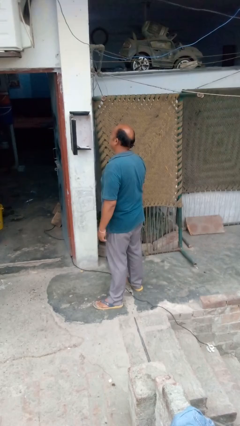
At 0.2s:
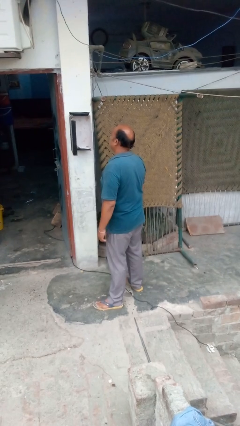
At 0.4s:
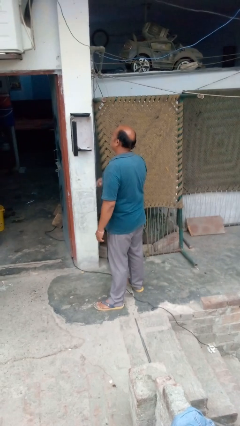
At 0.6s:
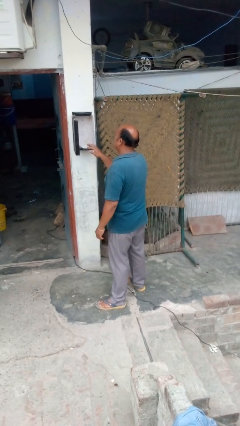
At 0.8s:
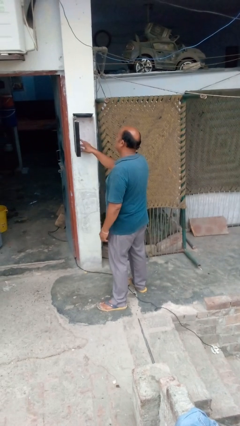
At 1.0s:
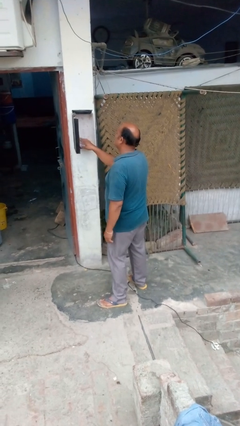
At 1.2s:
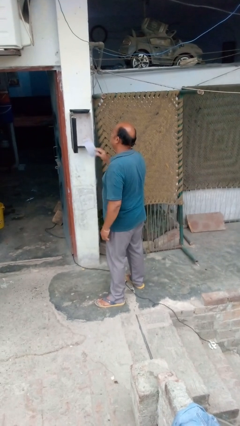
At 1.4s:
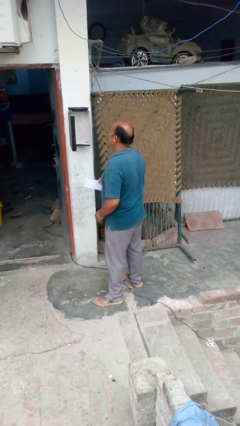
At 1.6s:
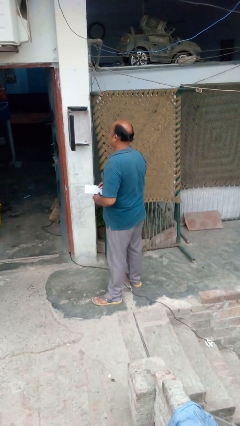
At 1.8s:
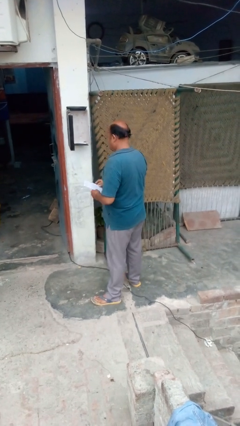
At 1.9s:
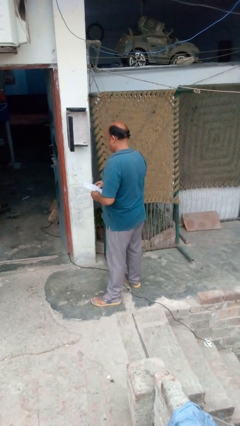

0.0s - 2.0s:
person takes letters from mailbox

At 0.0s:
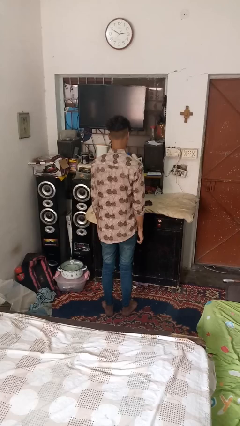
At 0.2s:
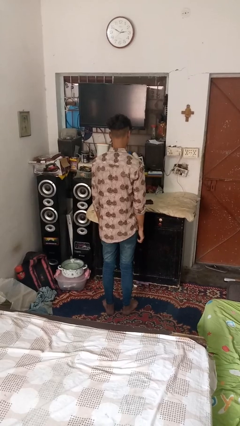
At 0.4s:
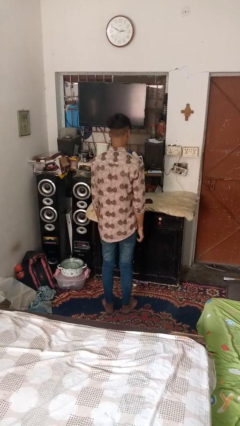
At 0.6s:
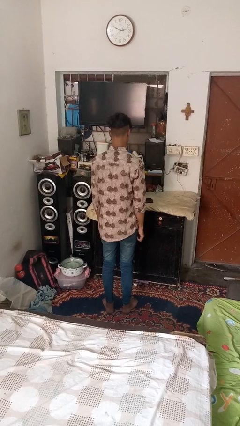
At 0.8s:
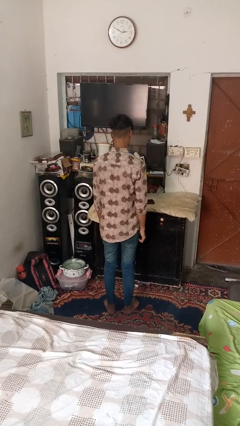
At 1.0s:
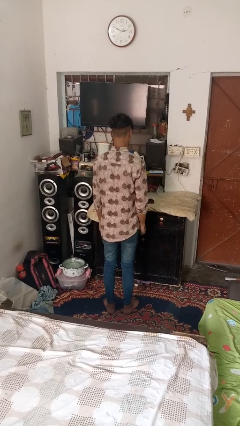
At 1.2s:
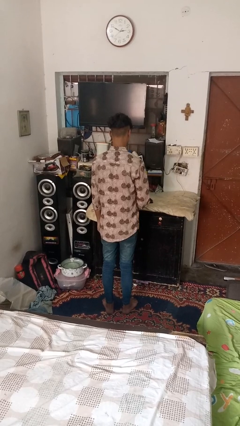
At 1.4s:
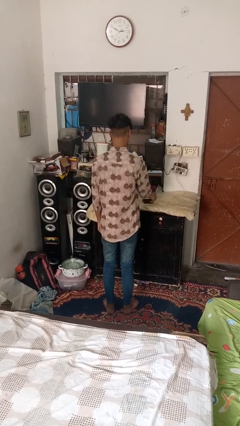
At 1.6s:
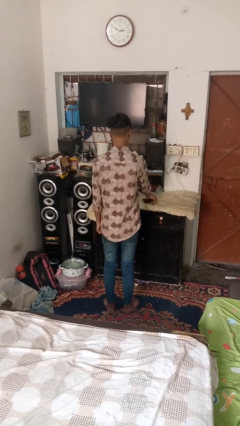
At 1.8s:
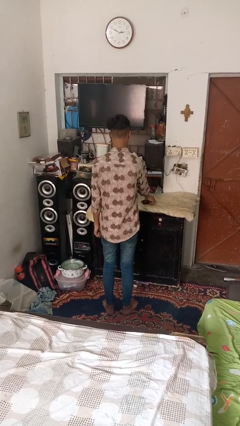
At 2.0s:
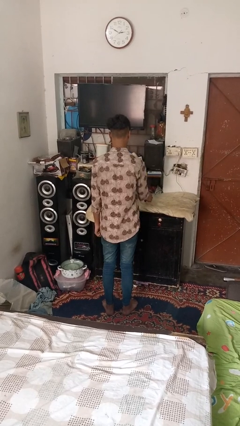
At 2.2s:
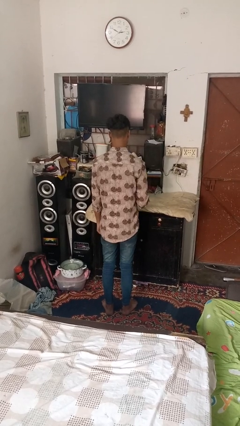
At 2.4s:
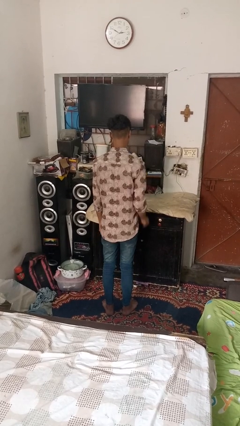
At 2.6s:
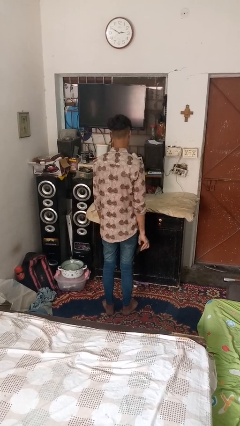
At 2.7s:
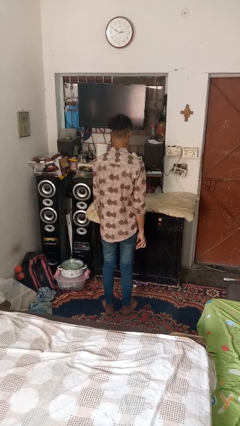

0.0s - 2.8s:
person picks up object from table

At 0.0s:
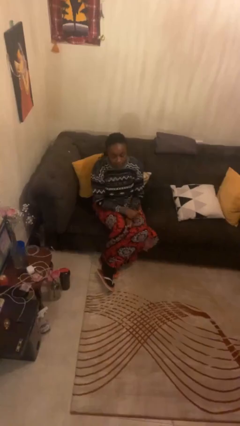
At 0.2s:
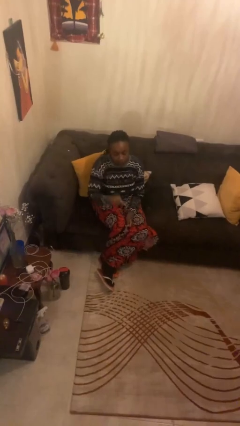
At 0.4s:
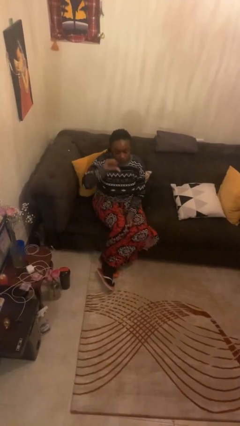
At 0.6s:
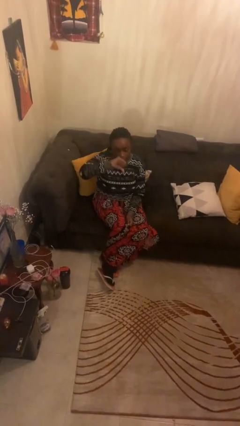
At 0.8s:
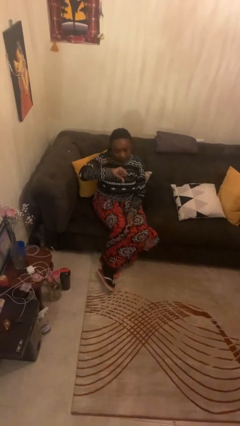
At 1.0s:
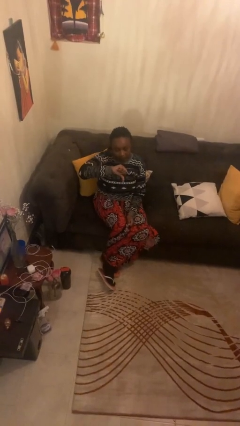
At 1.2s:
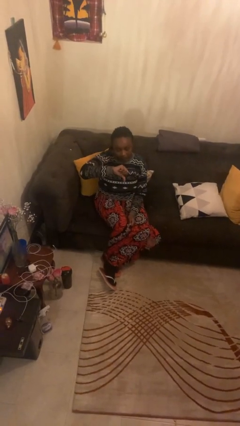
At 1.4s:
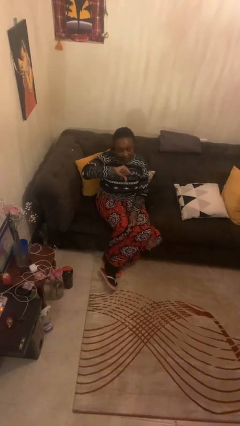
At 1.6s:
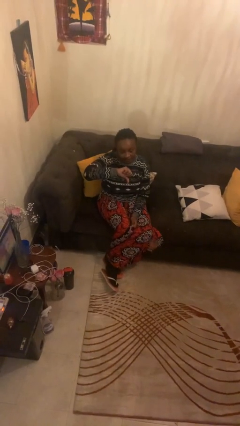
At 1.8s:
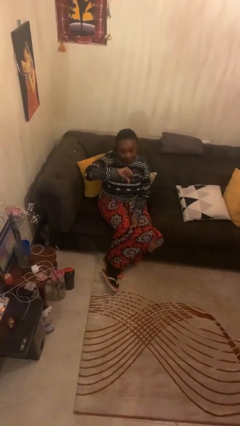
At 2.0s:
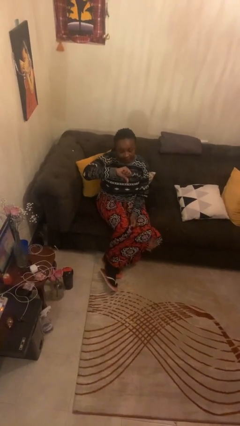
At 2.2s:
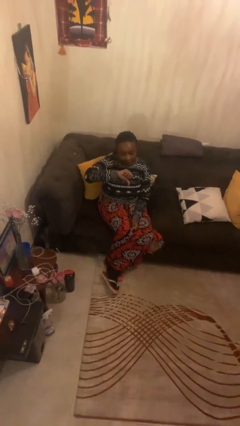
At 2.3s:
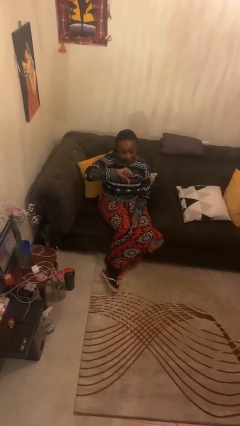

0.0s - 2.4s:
person gestures thumbs down

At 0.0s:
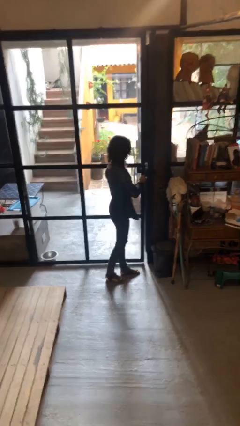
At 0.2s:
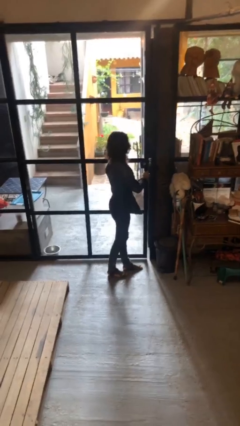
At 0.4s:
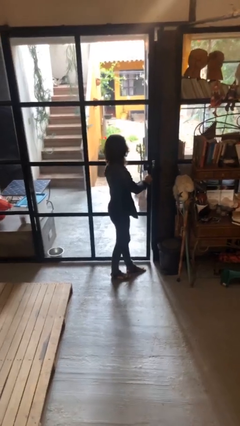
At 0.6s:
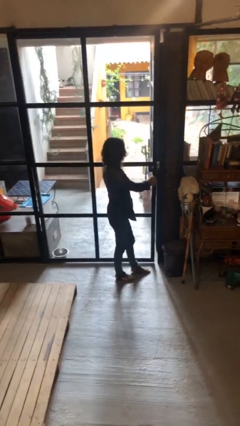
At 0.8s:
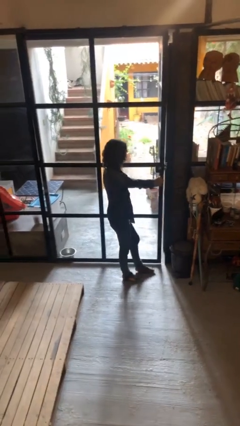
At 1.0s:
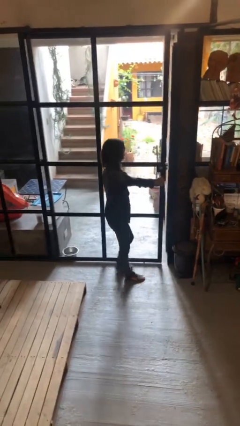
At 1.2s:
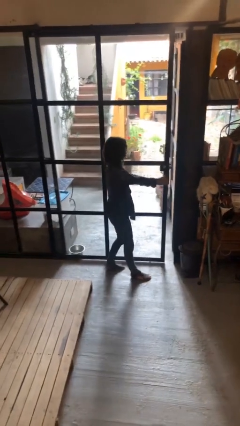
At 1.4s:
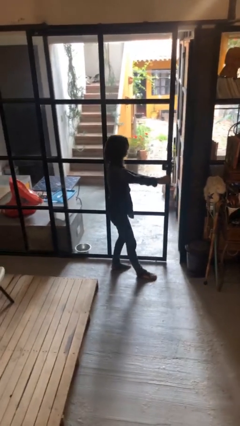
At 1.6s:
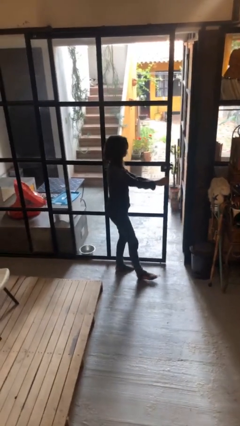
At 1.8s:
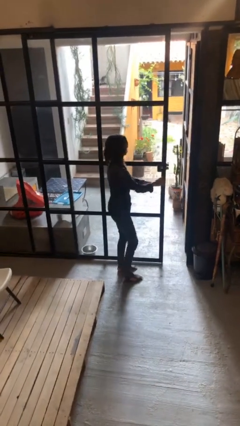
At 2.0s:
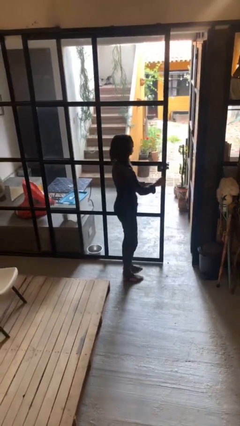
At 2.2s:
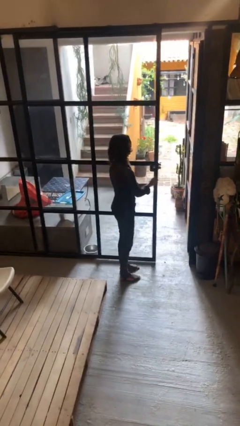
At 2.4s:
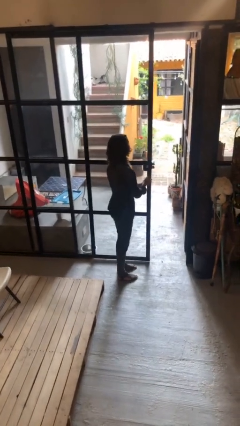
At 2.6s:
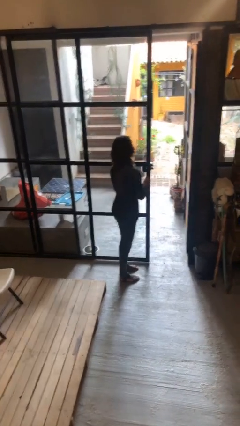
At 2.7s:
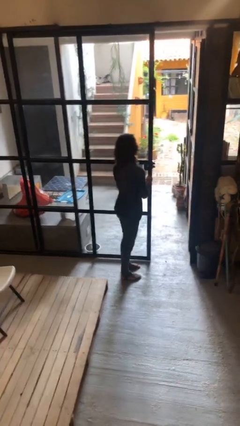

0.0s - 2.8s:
person opens sliding door

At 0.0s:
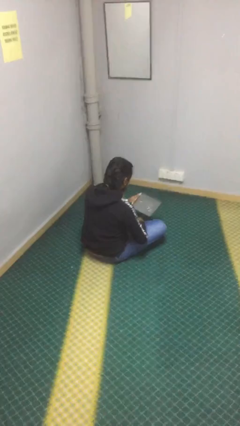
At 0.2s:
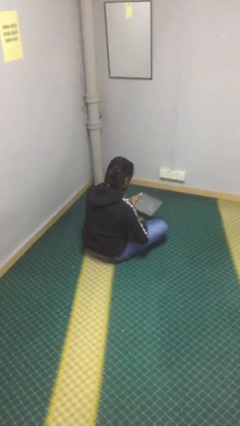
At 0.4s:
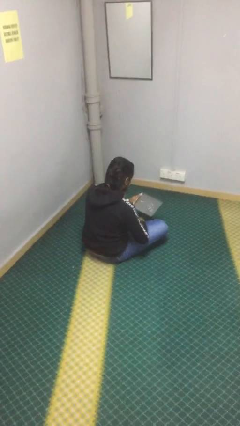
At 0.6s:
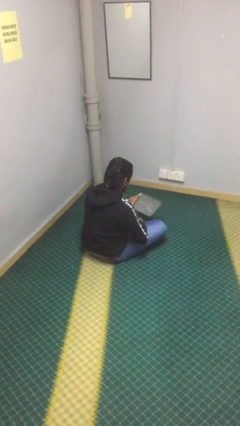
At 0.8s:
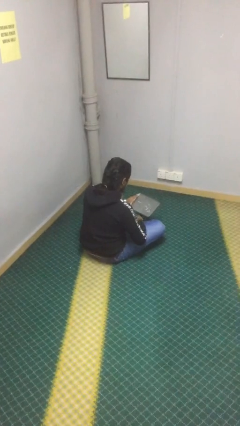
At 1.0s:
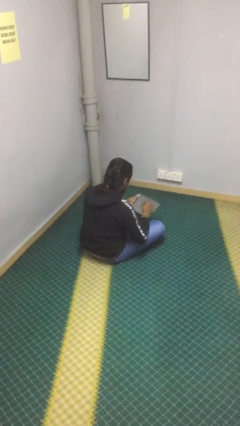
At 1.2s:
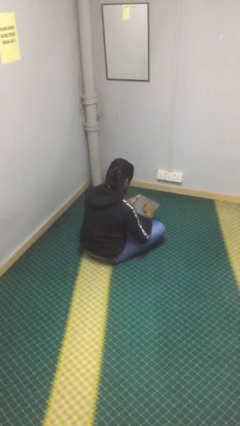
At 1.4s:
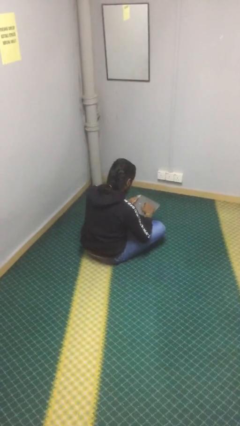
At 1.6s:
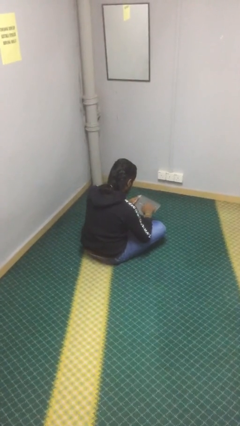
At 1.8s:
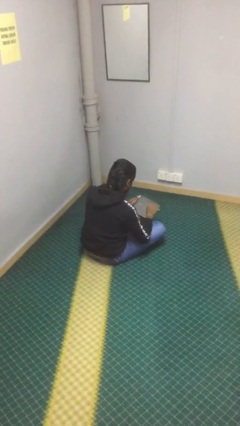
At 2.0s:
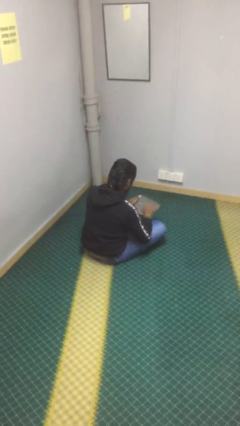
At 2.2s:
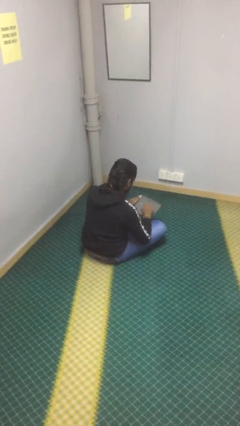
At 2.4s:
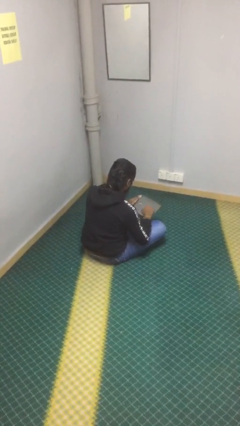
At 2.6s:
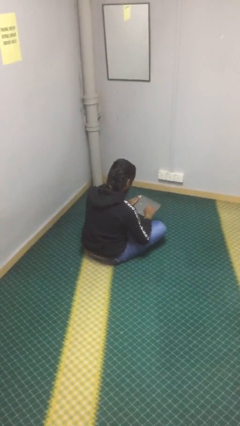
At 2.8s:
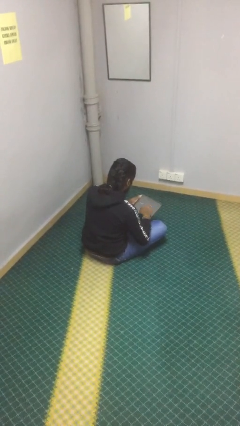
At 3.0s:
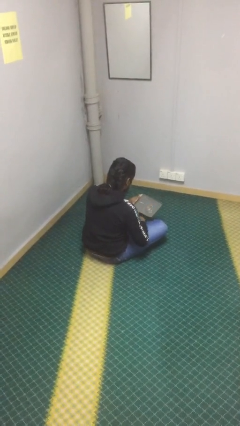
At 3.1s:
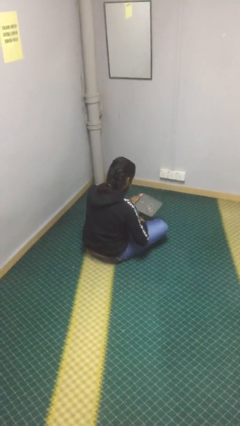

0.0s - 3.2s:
person interacts with tablet

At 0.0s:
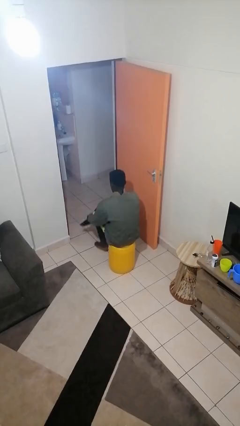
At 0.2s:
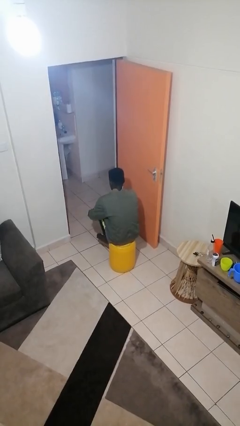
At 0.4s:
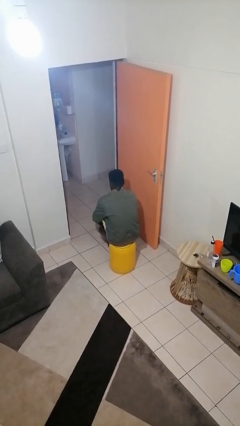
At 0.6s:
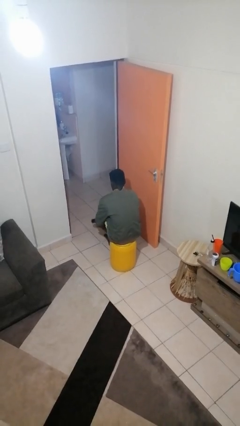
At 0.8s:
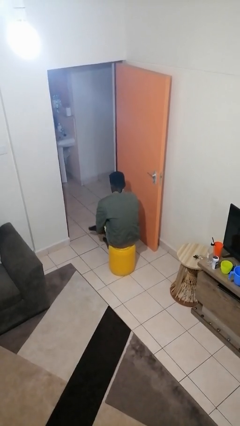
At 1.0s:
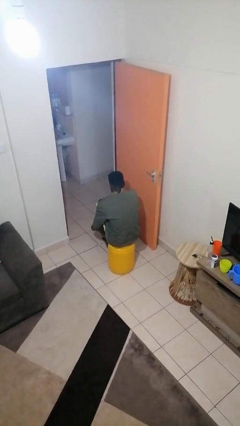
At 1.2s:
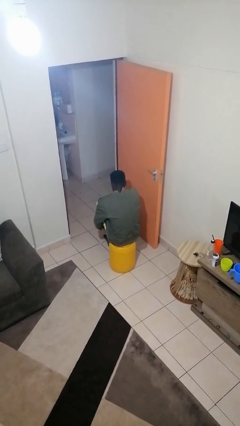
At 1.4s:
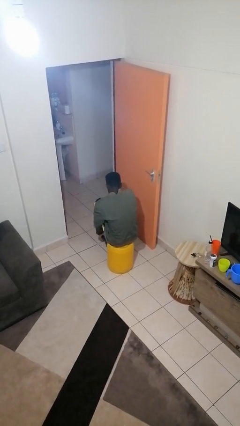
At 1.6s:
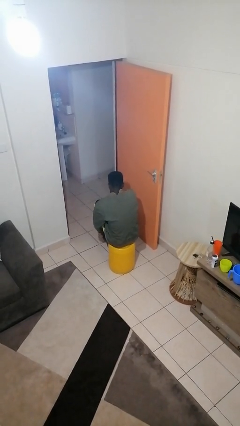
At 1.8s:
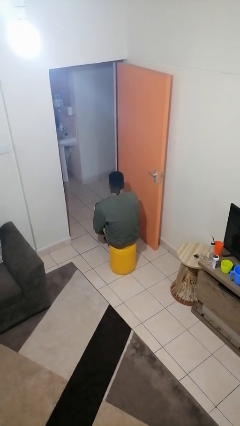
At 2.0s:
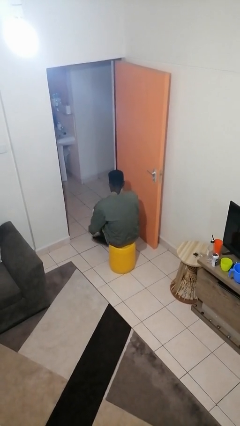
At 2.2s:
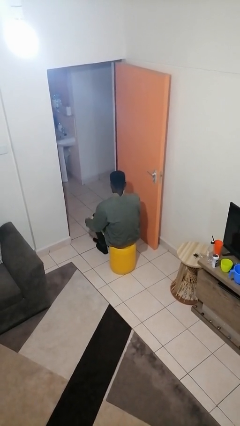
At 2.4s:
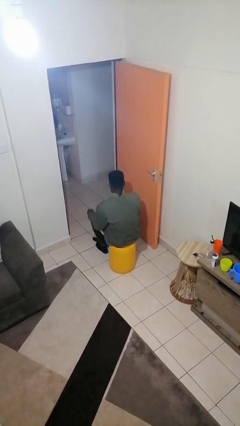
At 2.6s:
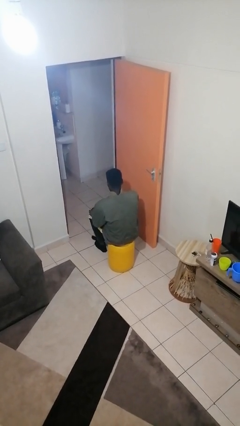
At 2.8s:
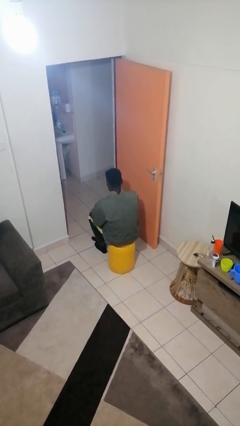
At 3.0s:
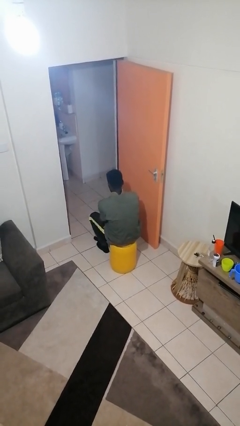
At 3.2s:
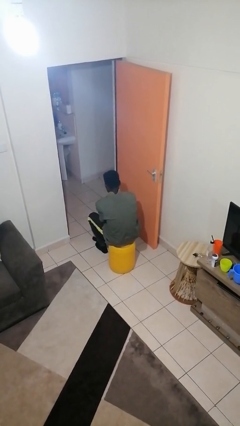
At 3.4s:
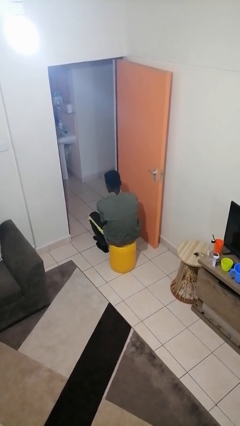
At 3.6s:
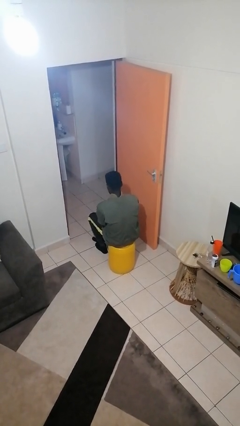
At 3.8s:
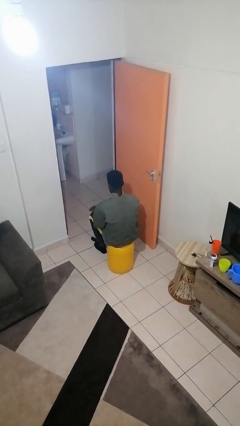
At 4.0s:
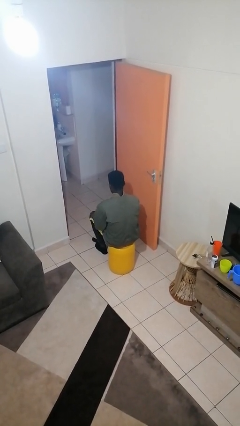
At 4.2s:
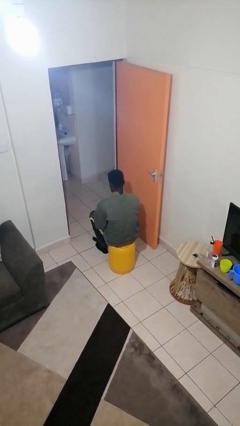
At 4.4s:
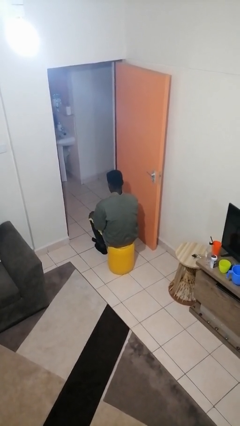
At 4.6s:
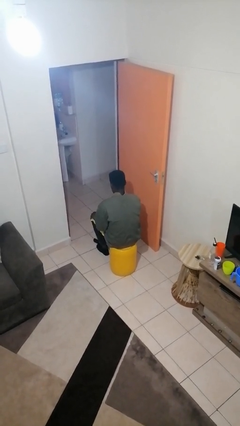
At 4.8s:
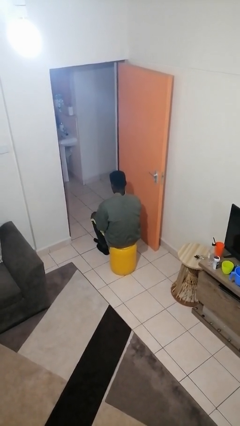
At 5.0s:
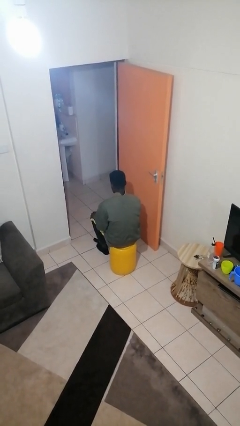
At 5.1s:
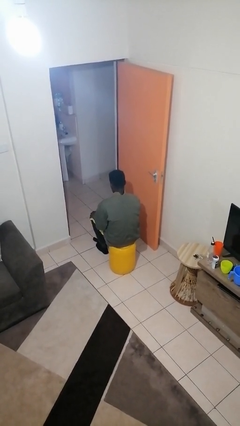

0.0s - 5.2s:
person puts on socks
